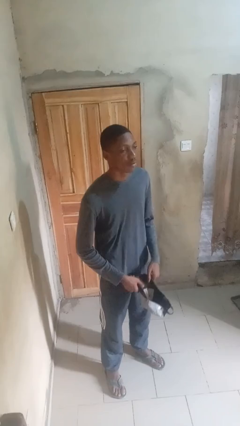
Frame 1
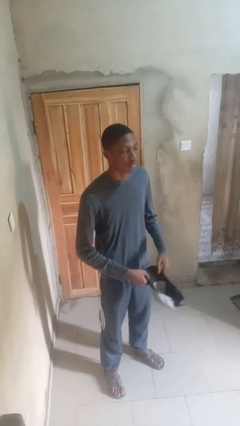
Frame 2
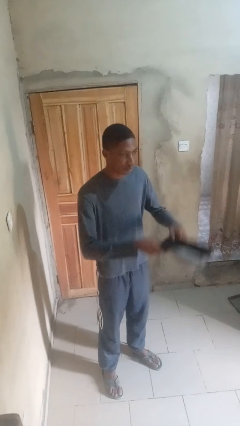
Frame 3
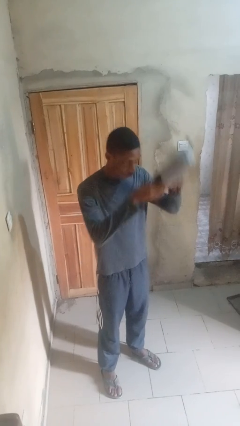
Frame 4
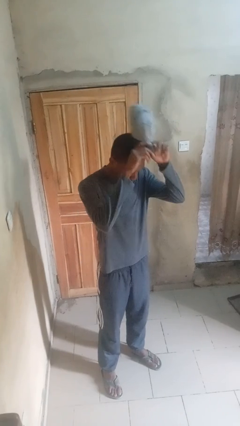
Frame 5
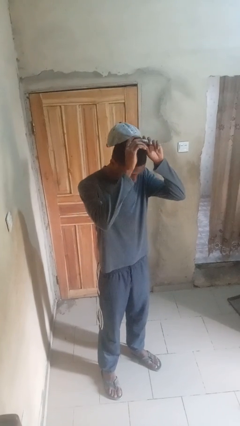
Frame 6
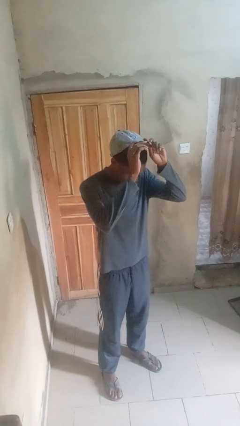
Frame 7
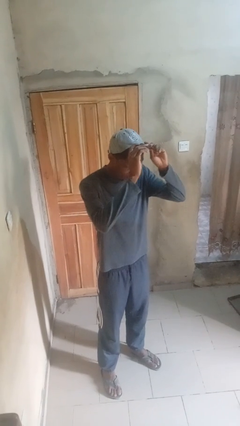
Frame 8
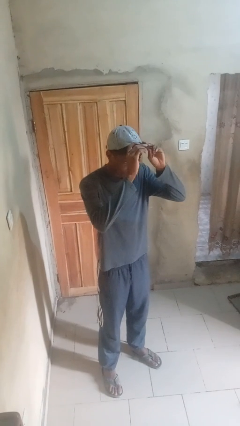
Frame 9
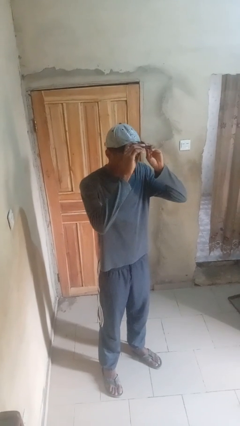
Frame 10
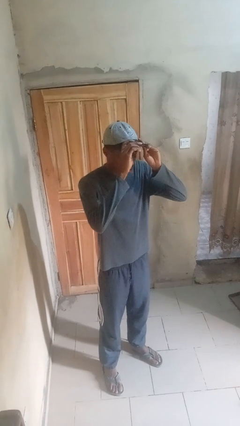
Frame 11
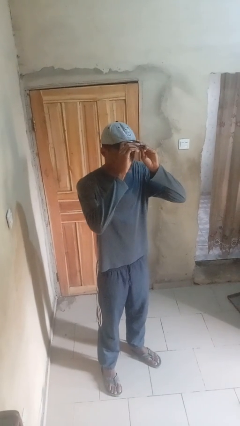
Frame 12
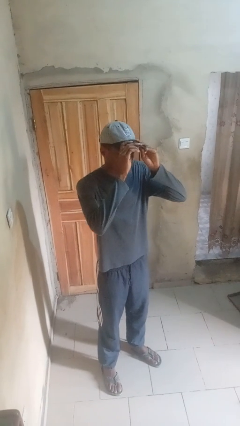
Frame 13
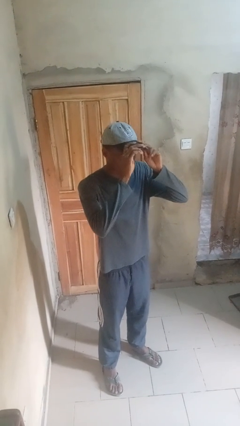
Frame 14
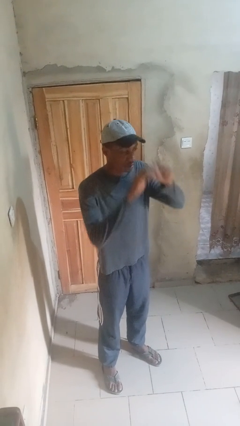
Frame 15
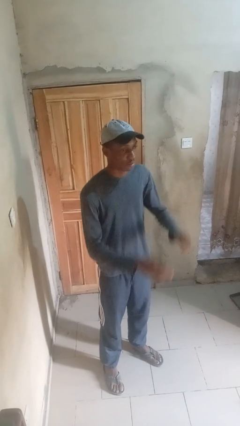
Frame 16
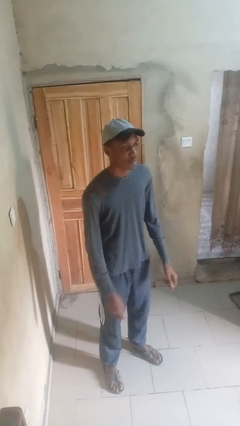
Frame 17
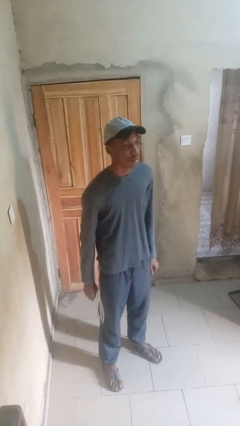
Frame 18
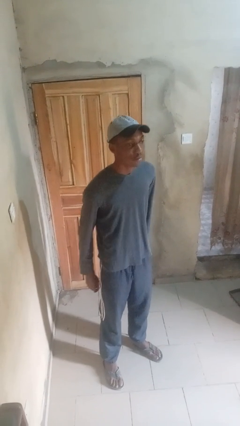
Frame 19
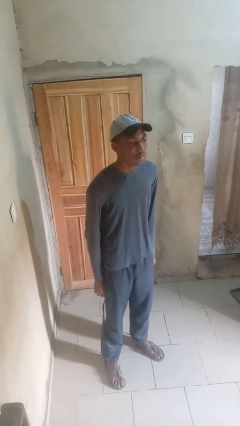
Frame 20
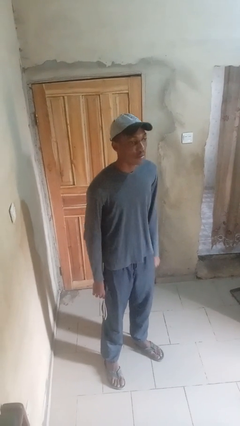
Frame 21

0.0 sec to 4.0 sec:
person puts on hat

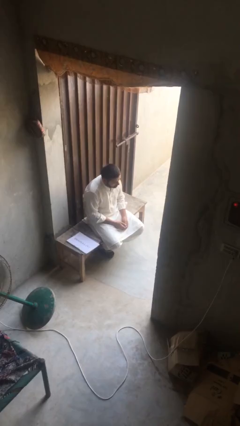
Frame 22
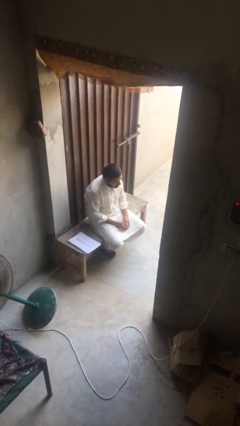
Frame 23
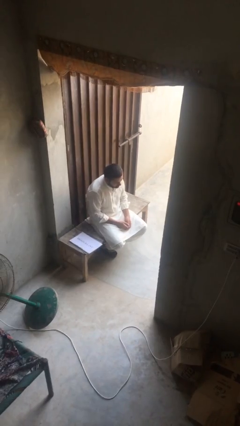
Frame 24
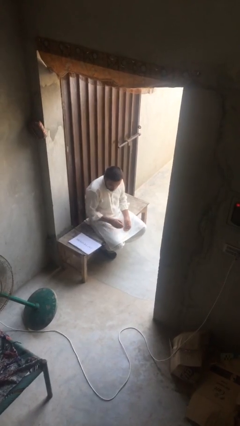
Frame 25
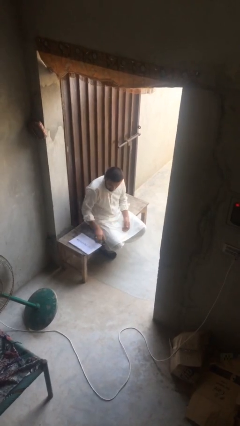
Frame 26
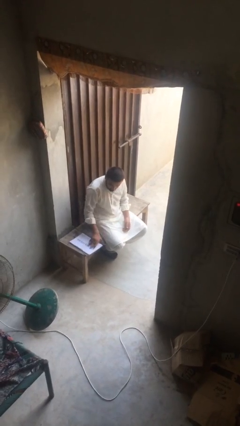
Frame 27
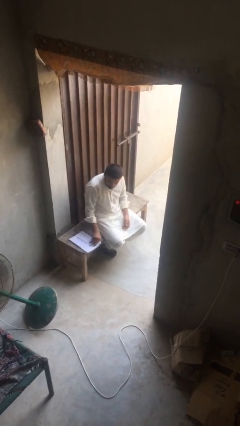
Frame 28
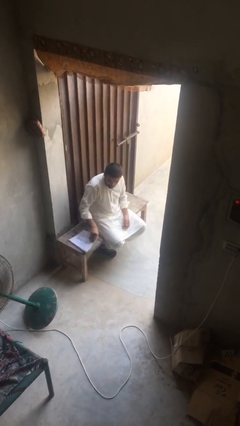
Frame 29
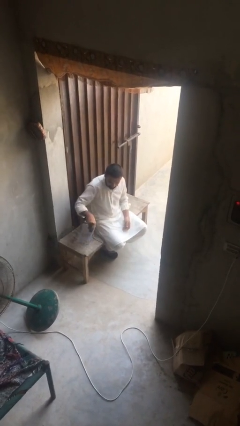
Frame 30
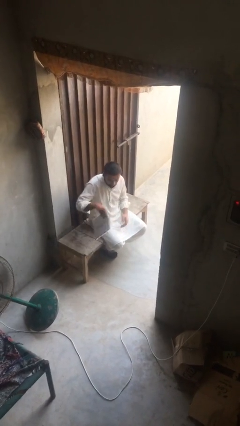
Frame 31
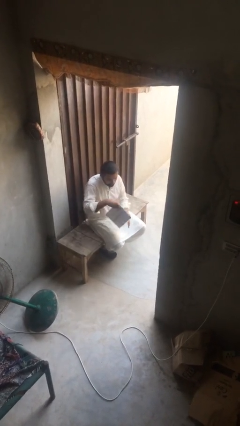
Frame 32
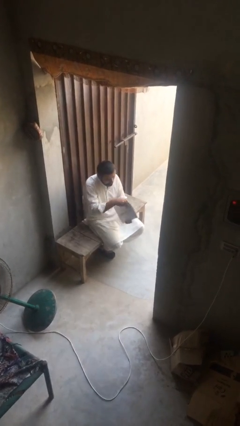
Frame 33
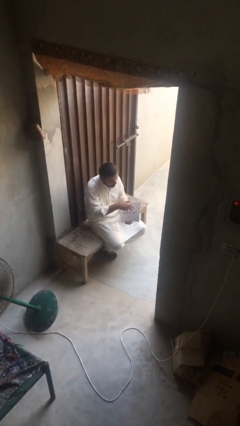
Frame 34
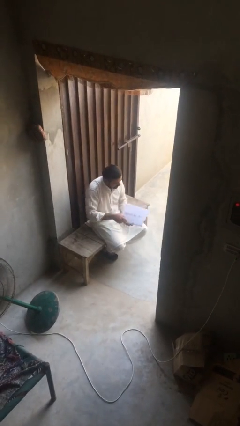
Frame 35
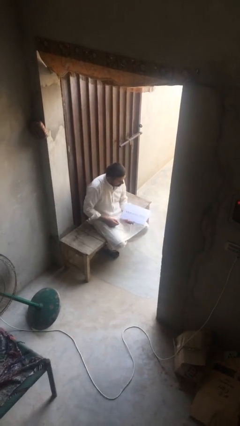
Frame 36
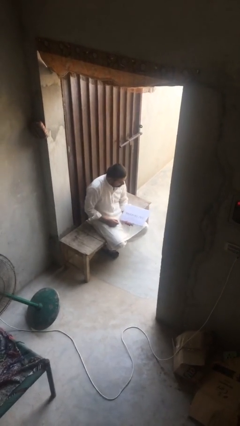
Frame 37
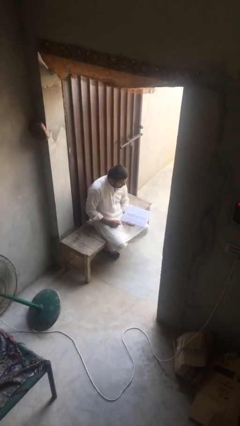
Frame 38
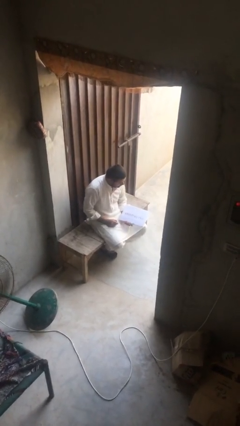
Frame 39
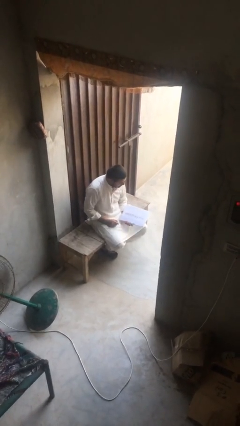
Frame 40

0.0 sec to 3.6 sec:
person picks up object from table

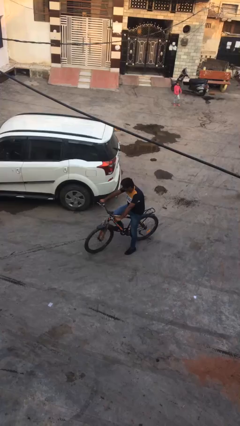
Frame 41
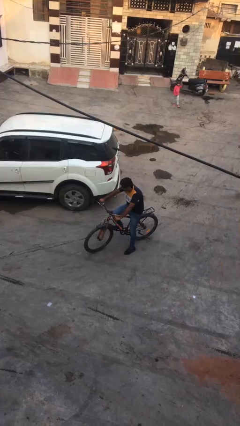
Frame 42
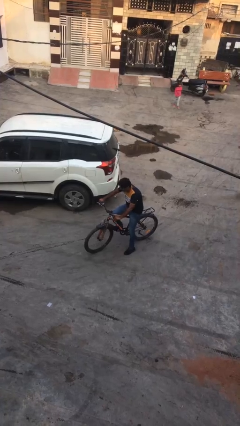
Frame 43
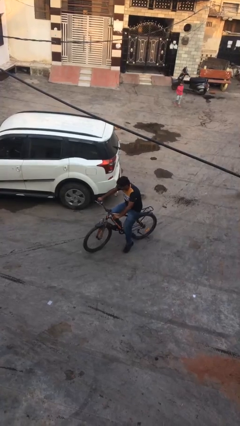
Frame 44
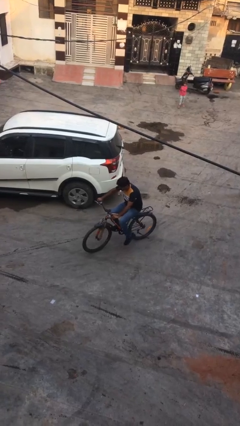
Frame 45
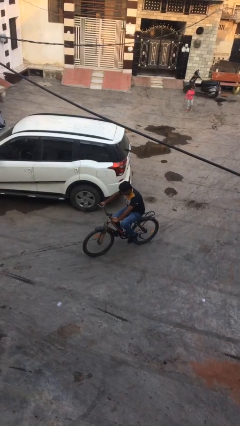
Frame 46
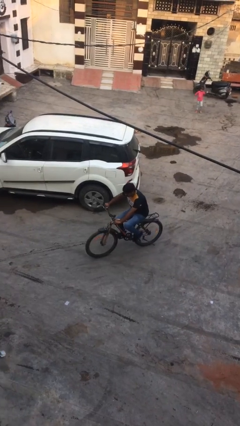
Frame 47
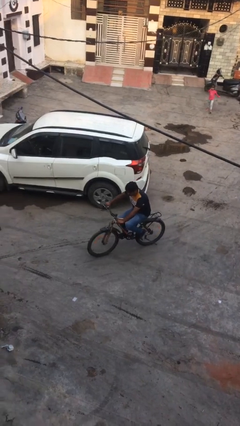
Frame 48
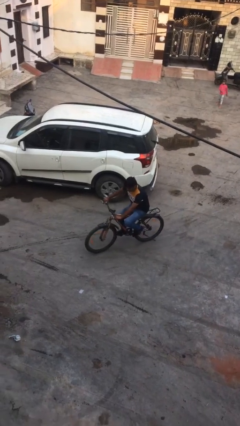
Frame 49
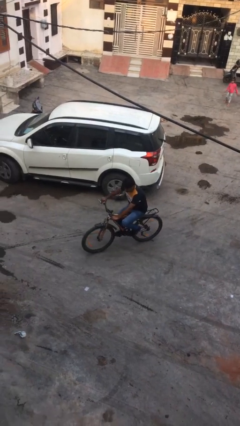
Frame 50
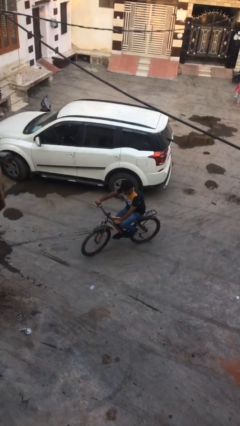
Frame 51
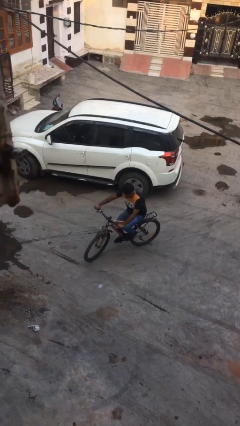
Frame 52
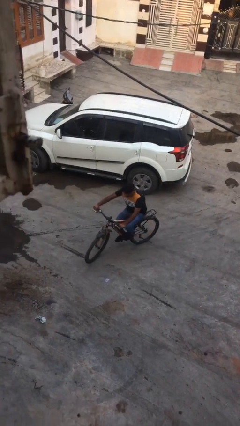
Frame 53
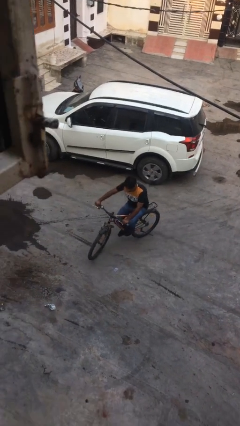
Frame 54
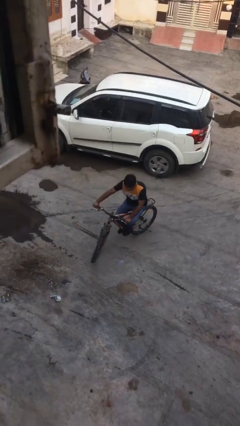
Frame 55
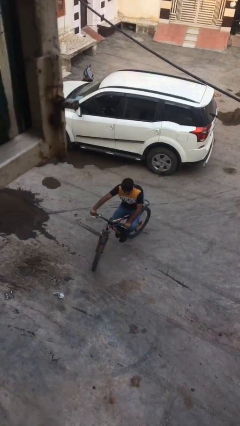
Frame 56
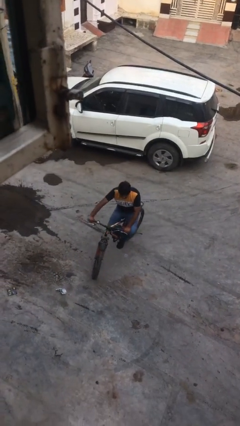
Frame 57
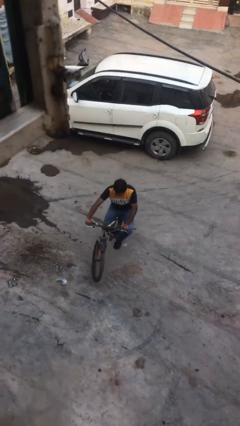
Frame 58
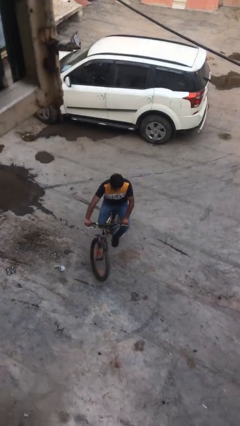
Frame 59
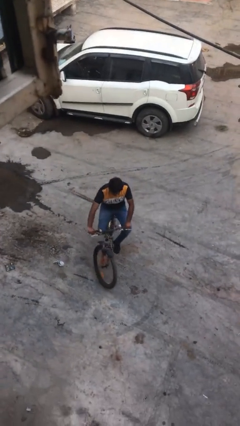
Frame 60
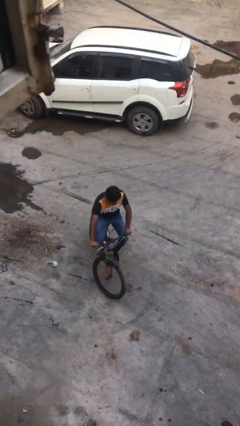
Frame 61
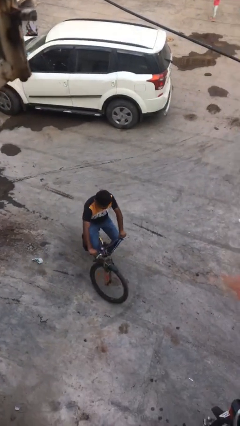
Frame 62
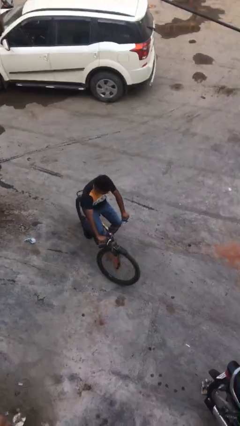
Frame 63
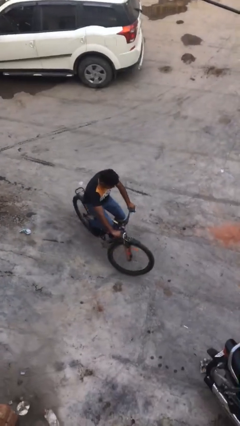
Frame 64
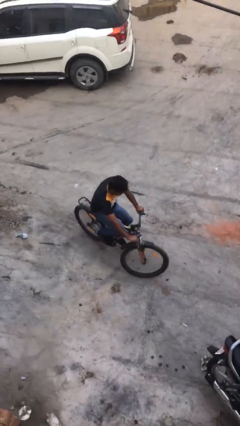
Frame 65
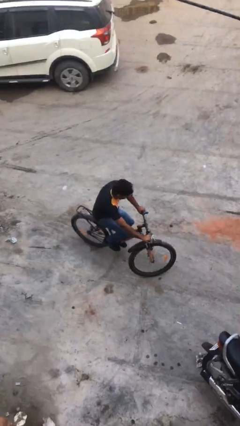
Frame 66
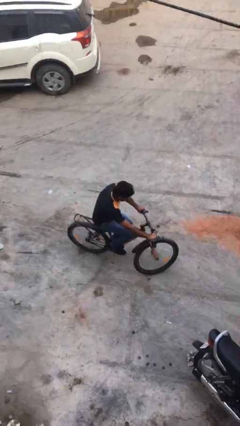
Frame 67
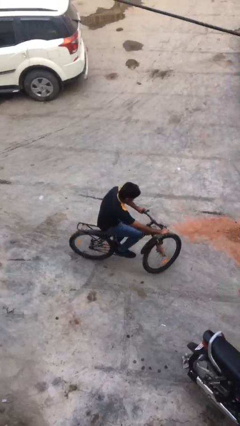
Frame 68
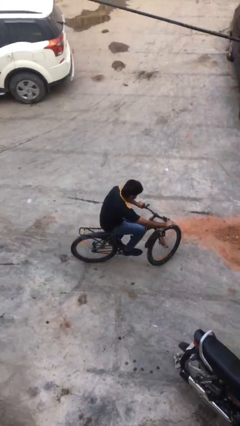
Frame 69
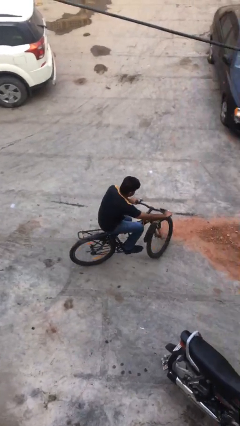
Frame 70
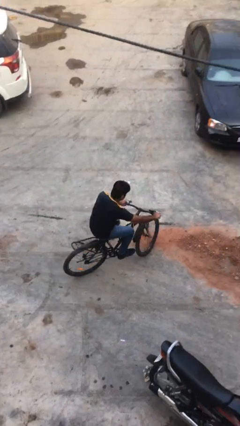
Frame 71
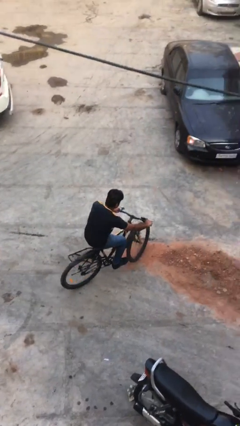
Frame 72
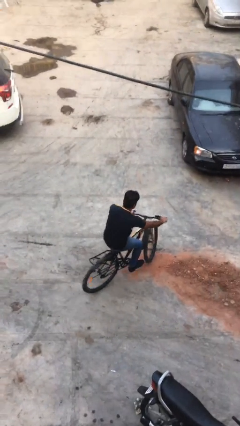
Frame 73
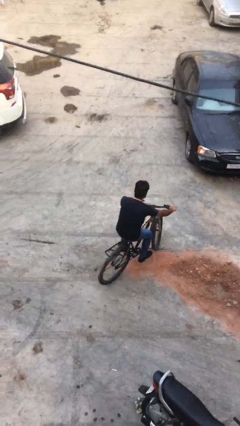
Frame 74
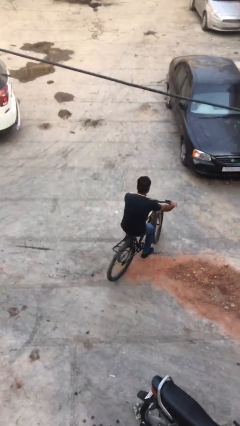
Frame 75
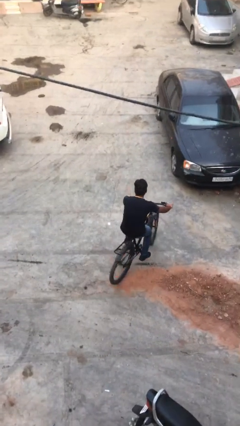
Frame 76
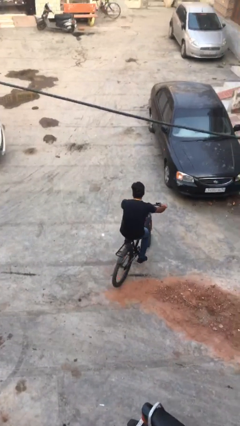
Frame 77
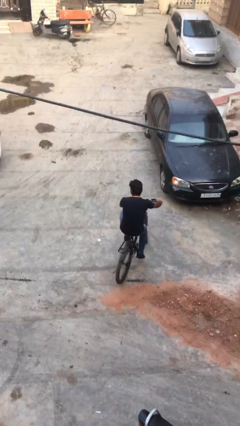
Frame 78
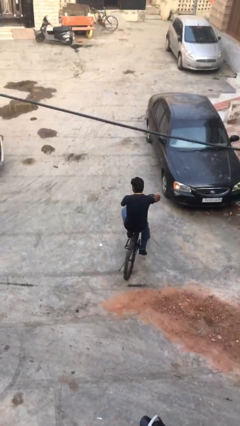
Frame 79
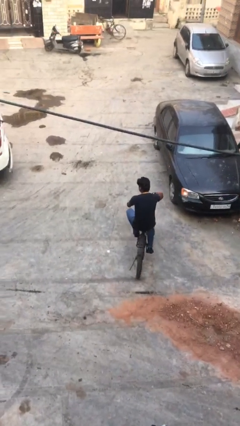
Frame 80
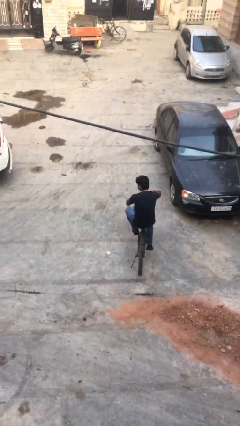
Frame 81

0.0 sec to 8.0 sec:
person rides bicycle

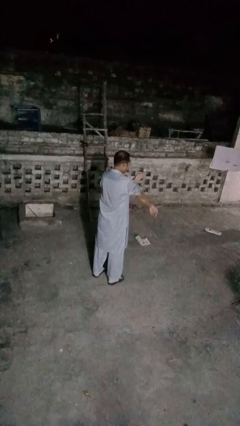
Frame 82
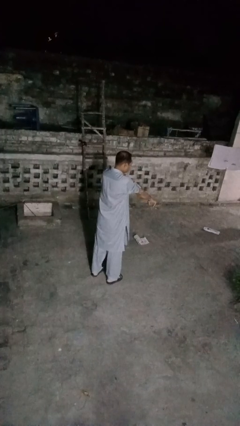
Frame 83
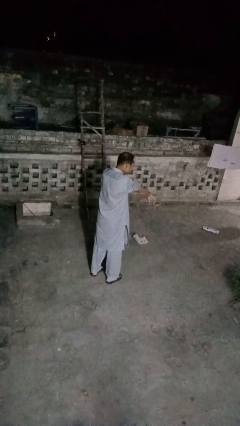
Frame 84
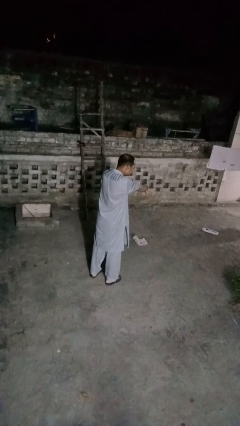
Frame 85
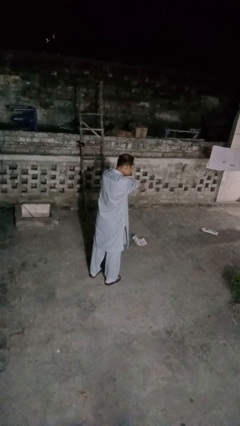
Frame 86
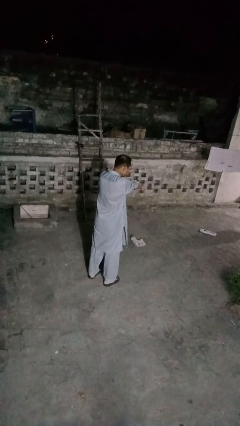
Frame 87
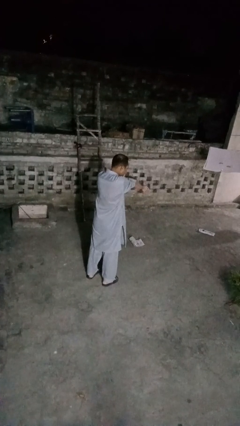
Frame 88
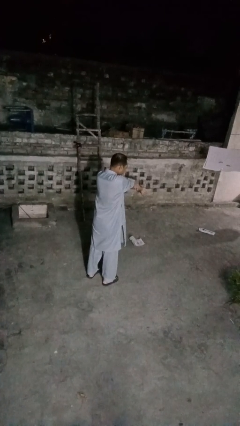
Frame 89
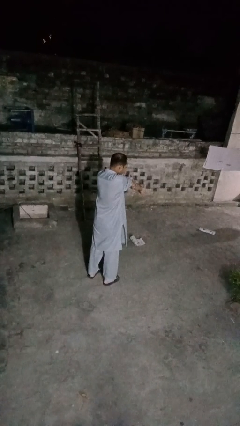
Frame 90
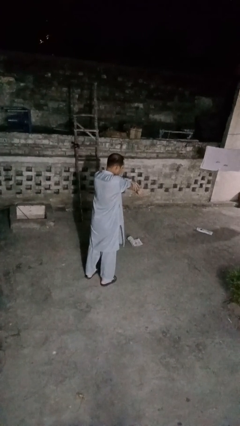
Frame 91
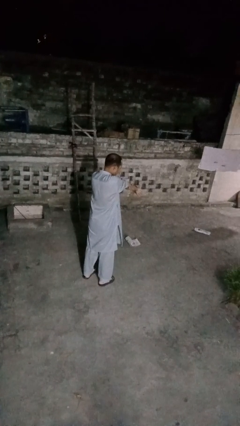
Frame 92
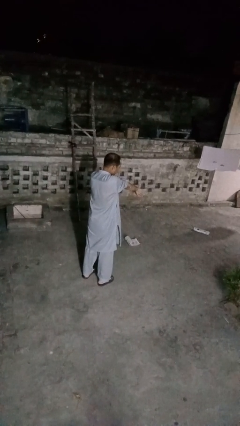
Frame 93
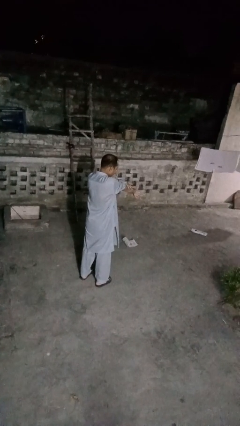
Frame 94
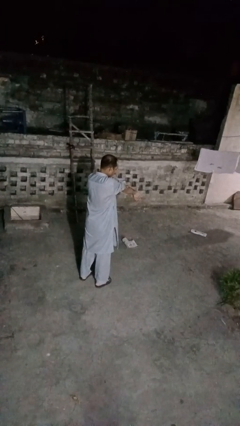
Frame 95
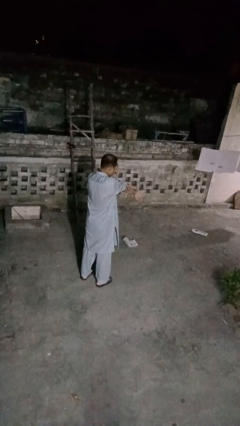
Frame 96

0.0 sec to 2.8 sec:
person swats bug
